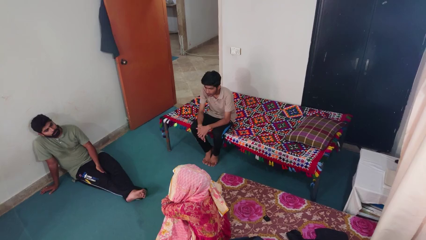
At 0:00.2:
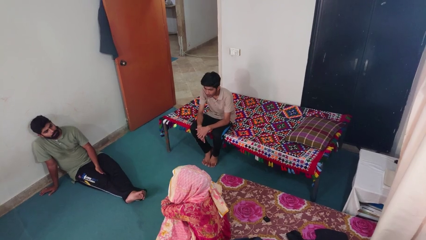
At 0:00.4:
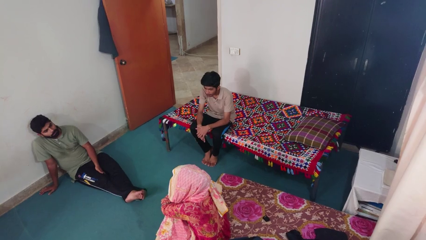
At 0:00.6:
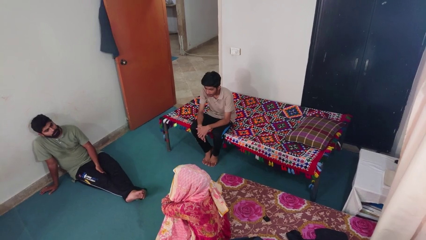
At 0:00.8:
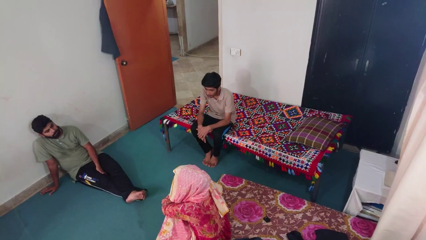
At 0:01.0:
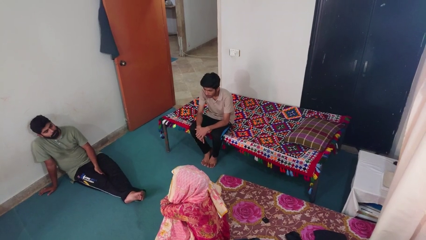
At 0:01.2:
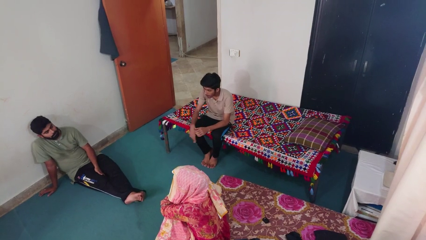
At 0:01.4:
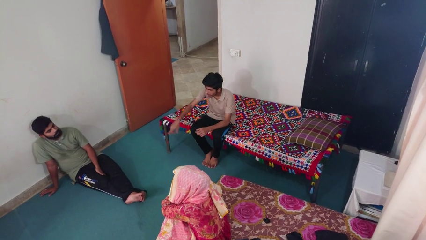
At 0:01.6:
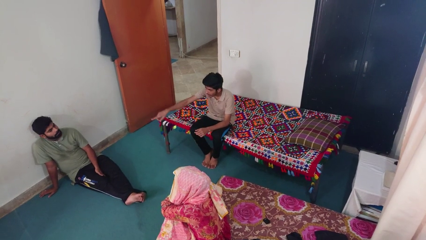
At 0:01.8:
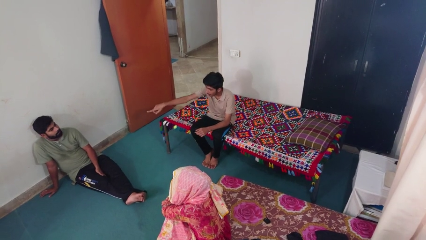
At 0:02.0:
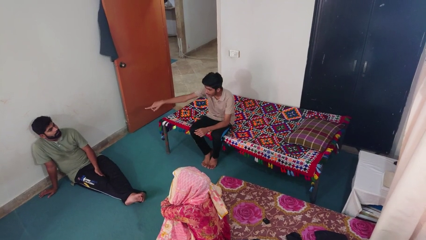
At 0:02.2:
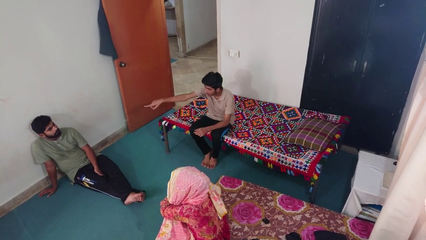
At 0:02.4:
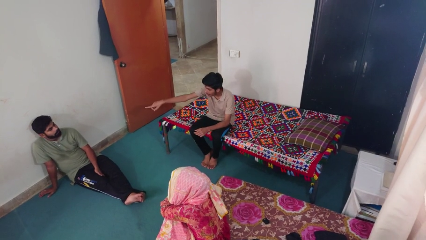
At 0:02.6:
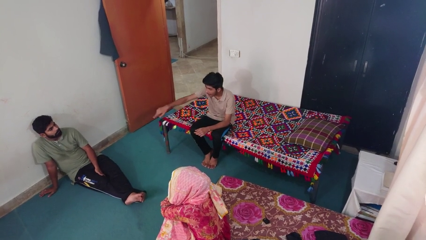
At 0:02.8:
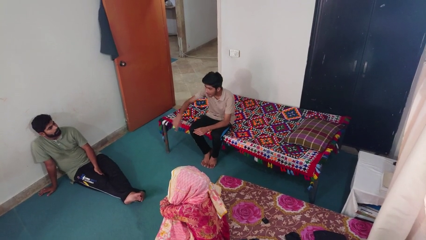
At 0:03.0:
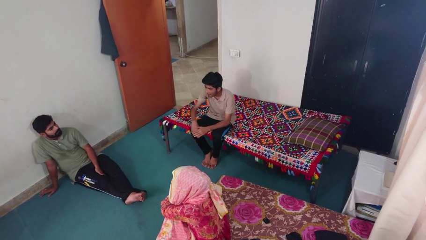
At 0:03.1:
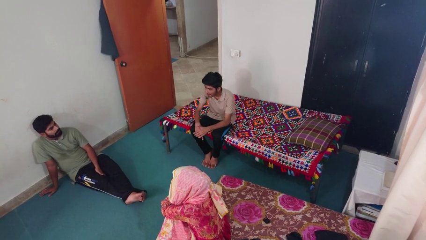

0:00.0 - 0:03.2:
person points at person

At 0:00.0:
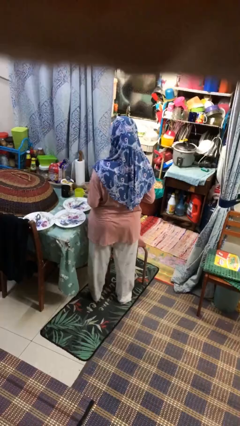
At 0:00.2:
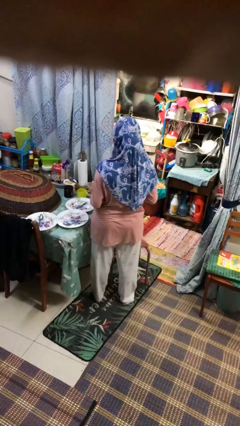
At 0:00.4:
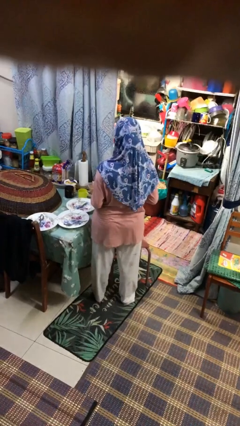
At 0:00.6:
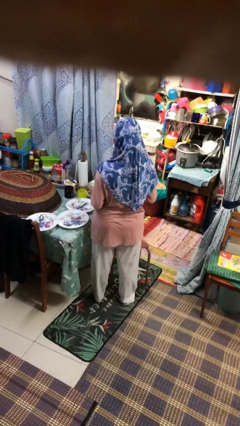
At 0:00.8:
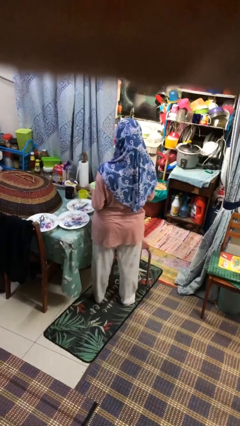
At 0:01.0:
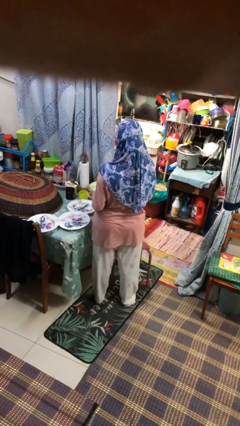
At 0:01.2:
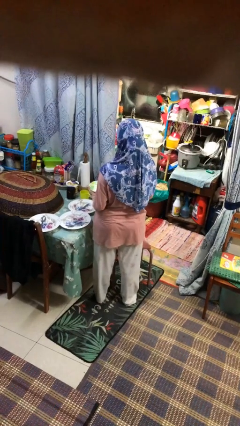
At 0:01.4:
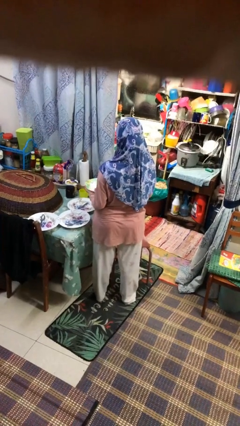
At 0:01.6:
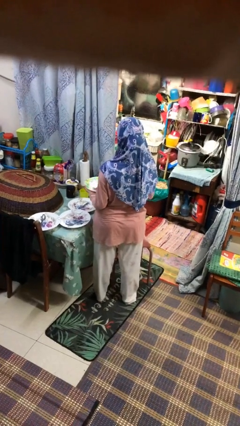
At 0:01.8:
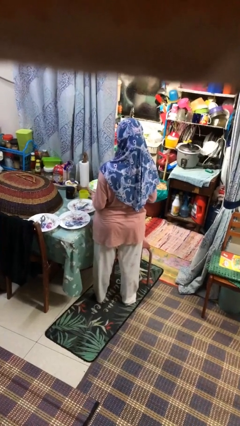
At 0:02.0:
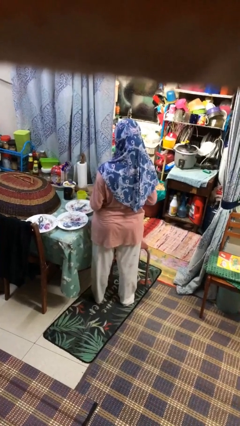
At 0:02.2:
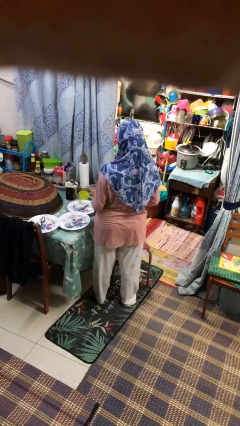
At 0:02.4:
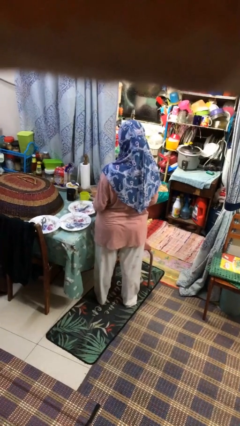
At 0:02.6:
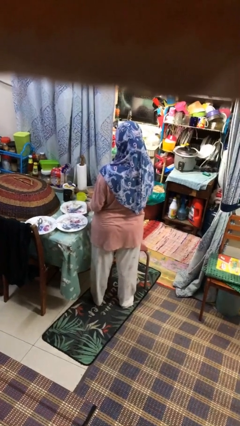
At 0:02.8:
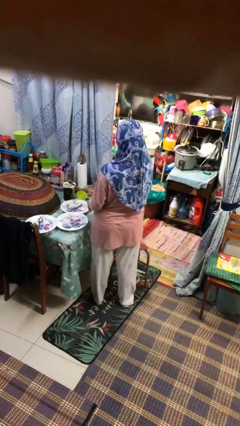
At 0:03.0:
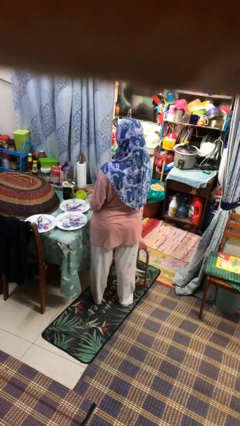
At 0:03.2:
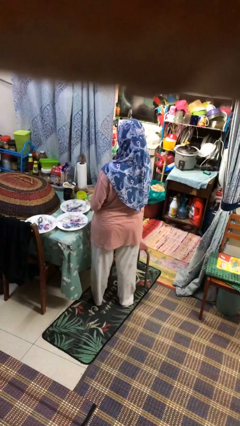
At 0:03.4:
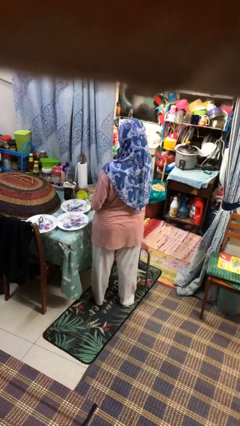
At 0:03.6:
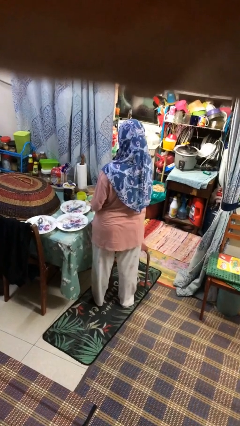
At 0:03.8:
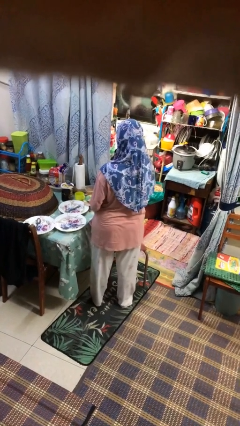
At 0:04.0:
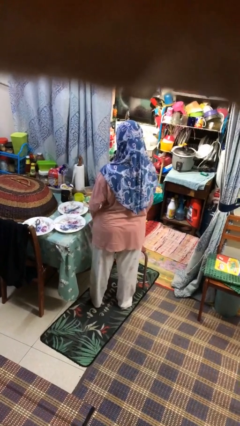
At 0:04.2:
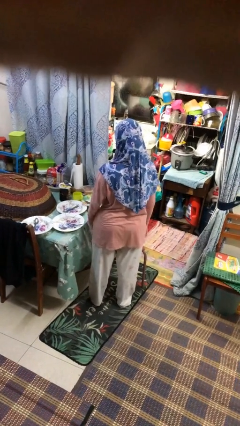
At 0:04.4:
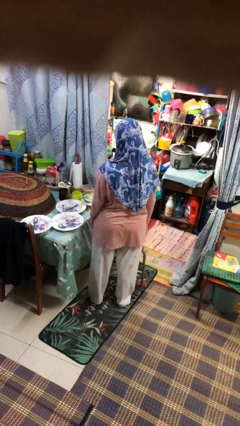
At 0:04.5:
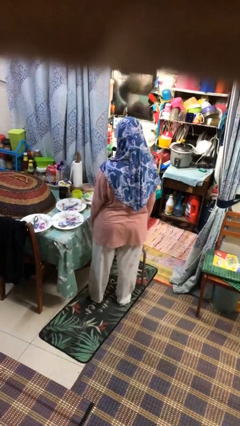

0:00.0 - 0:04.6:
person sets table

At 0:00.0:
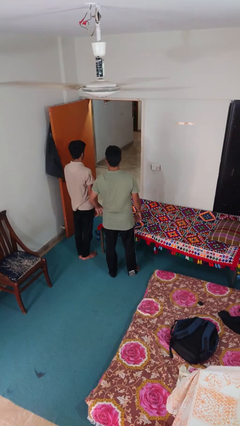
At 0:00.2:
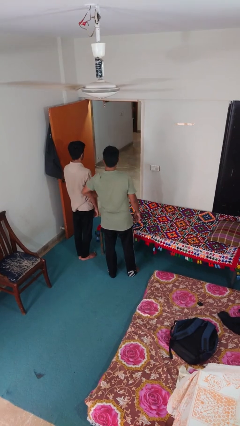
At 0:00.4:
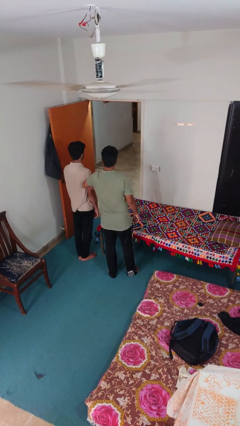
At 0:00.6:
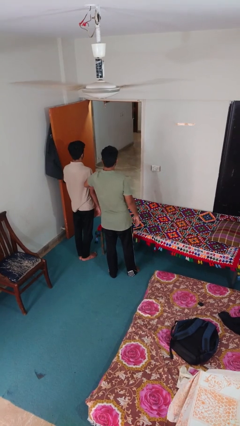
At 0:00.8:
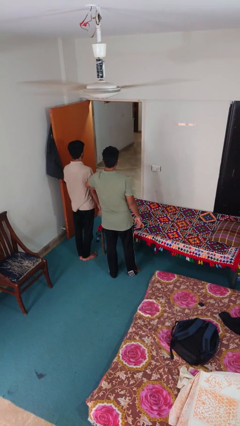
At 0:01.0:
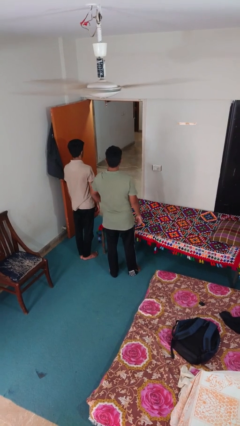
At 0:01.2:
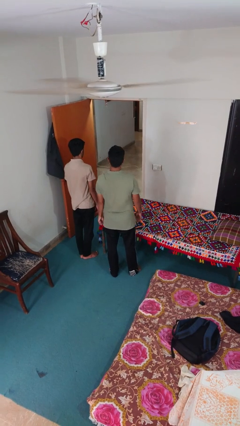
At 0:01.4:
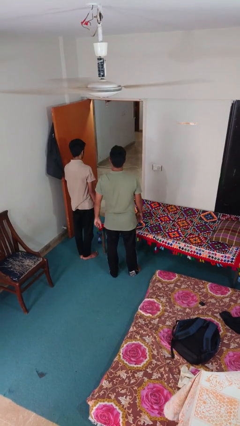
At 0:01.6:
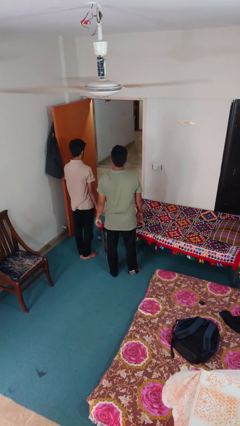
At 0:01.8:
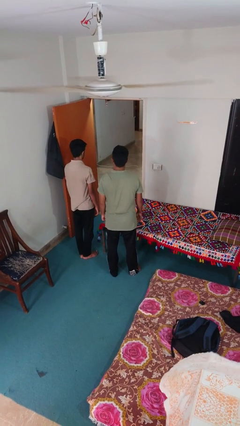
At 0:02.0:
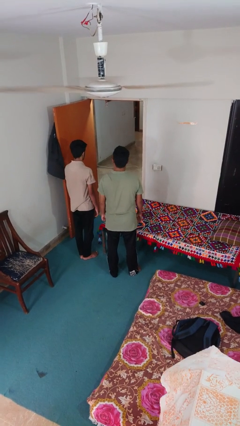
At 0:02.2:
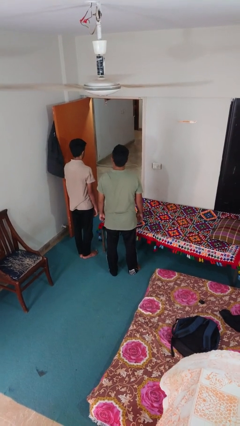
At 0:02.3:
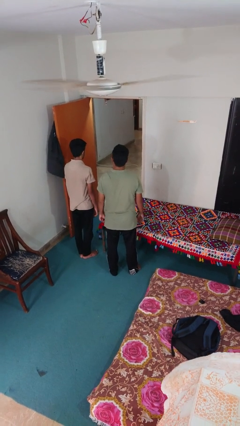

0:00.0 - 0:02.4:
person nudges person with elbow

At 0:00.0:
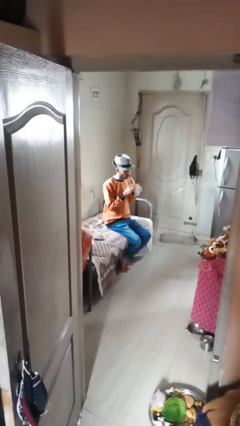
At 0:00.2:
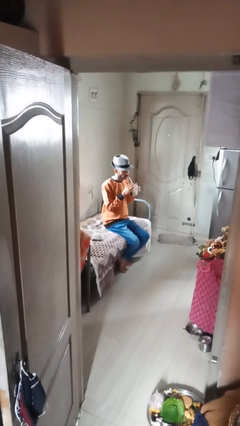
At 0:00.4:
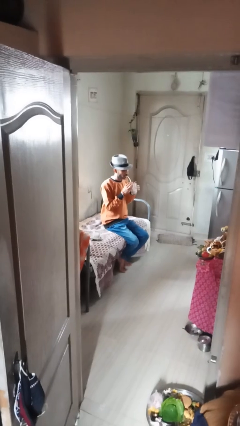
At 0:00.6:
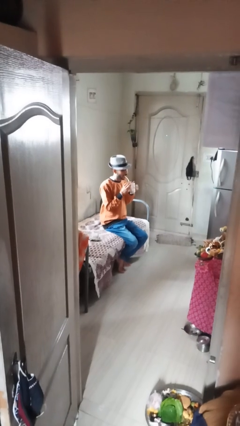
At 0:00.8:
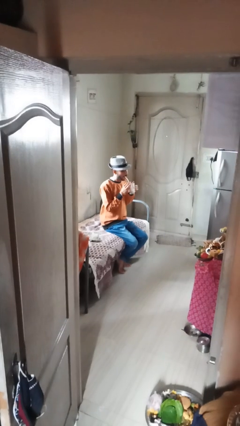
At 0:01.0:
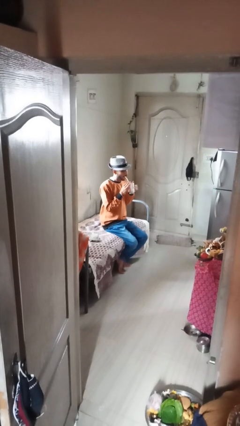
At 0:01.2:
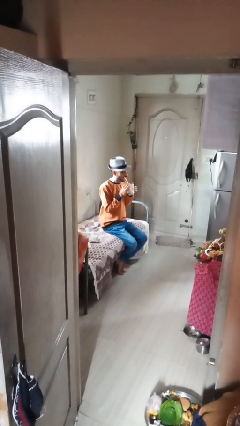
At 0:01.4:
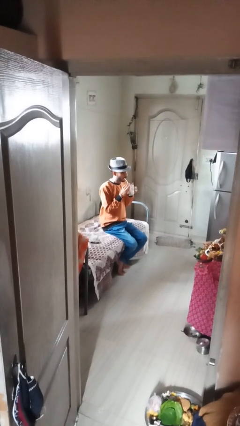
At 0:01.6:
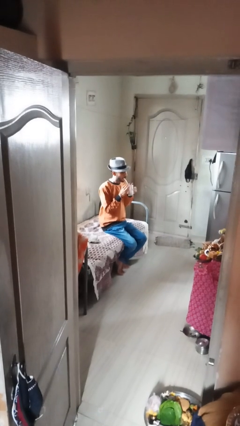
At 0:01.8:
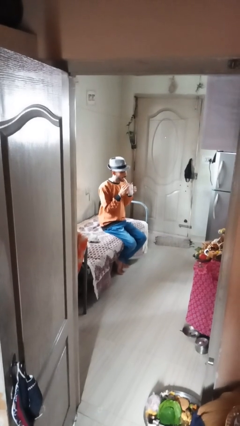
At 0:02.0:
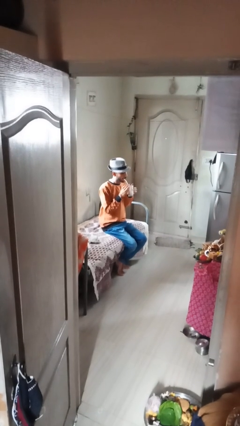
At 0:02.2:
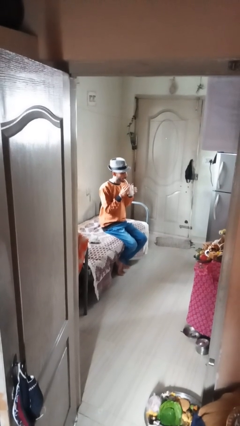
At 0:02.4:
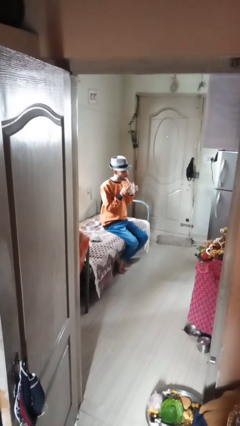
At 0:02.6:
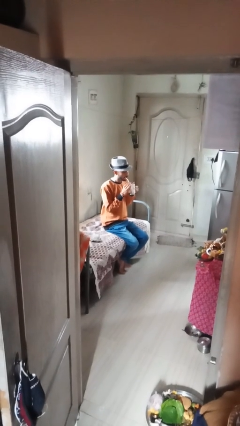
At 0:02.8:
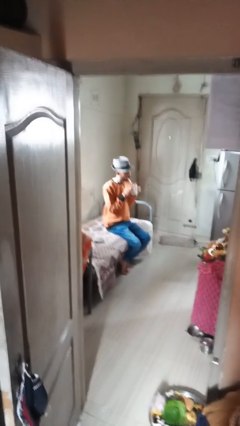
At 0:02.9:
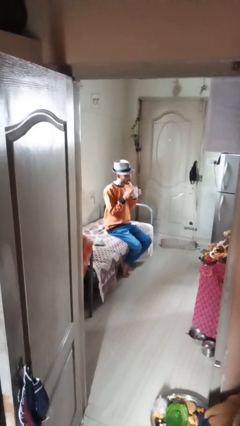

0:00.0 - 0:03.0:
person drinks from straw

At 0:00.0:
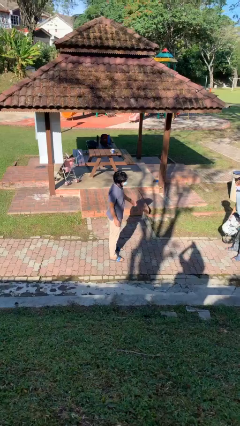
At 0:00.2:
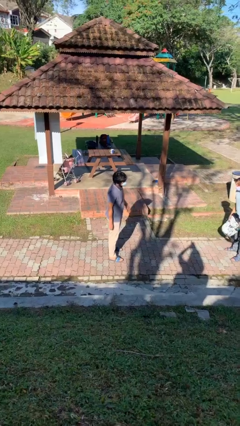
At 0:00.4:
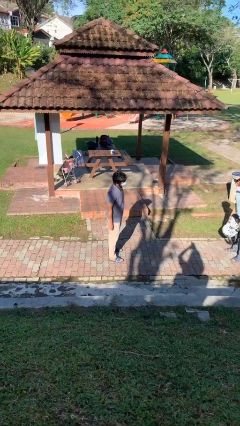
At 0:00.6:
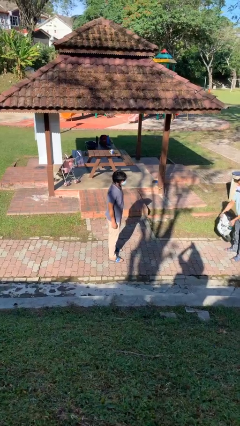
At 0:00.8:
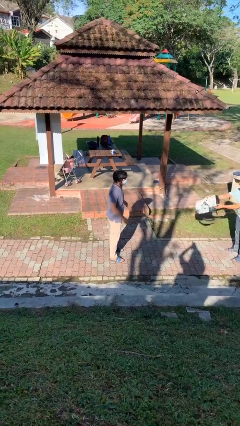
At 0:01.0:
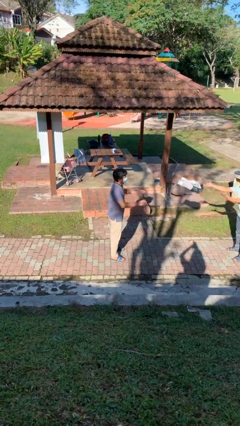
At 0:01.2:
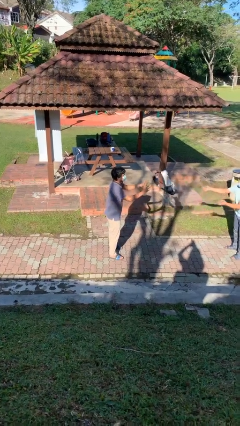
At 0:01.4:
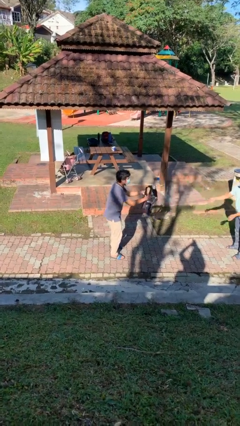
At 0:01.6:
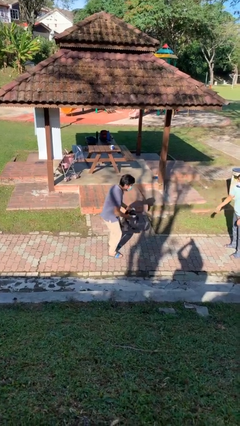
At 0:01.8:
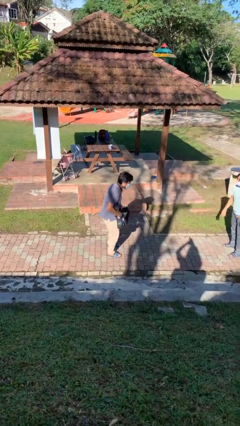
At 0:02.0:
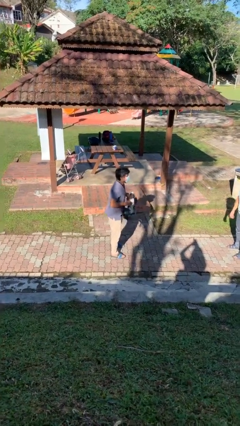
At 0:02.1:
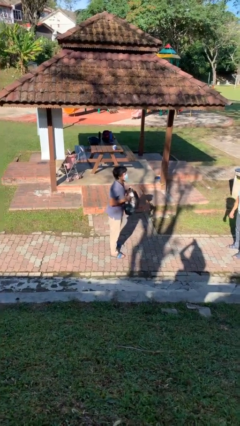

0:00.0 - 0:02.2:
person catches object from person

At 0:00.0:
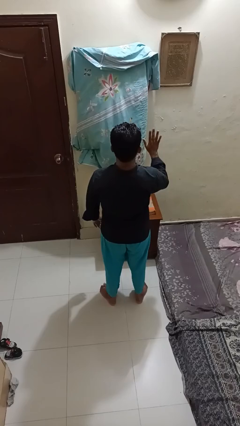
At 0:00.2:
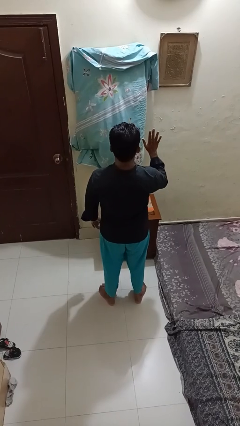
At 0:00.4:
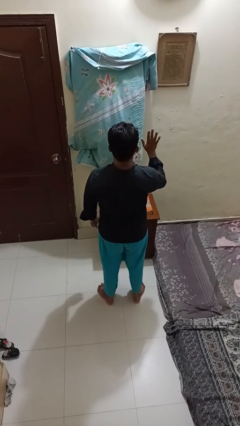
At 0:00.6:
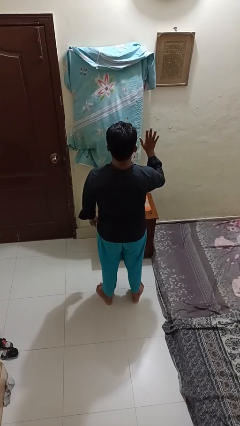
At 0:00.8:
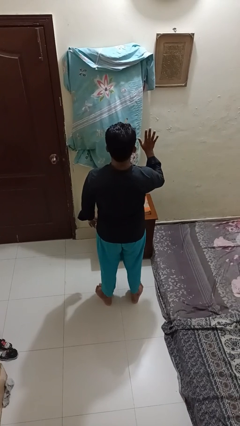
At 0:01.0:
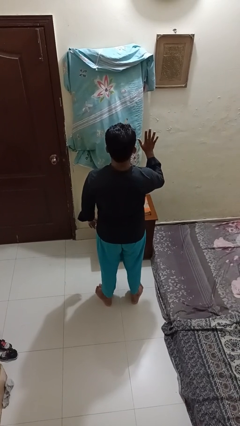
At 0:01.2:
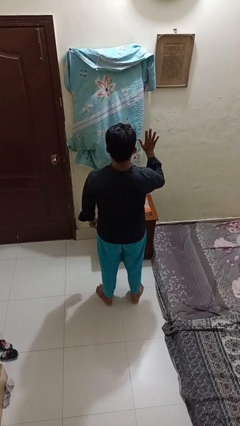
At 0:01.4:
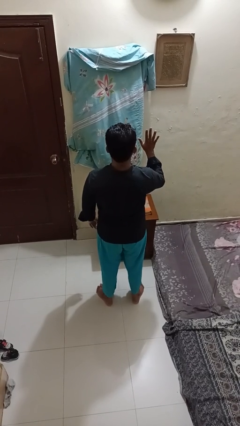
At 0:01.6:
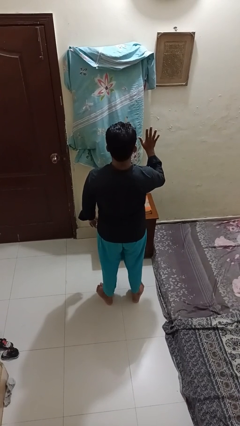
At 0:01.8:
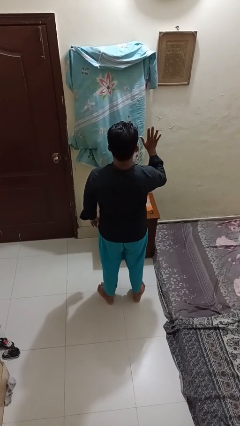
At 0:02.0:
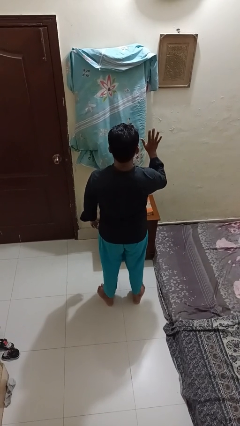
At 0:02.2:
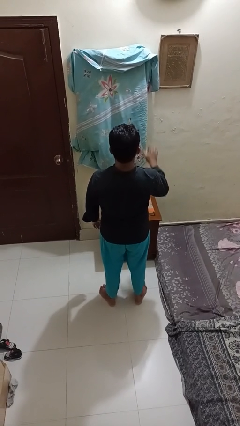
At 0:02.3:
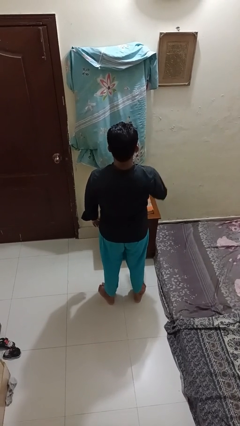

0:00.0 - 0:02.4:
person gestures number five
